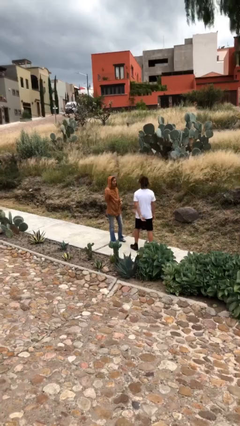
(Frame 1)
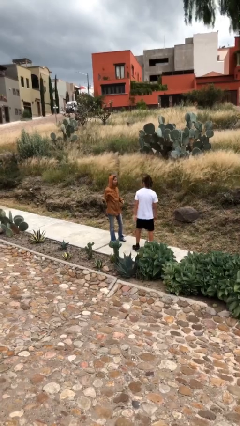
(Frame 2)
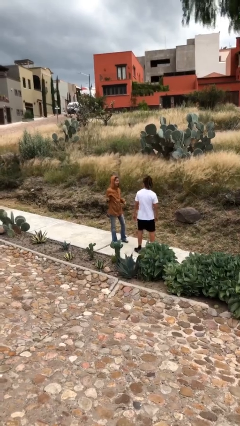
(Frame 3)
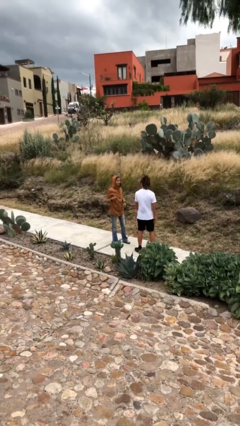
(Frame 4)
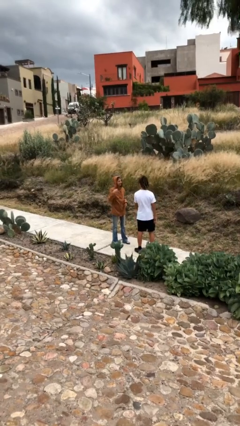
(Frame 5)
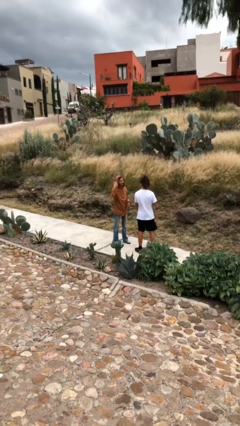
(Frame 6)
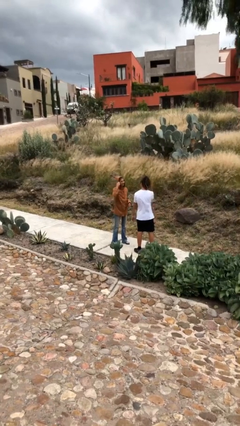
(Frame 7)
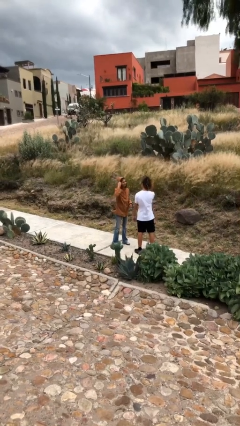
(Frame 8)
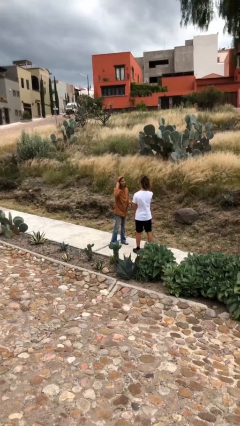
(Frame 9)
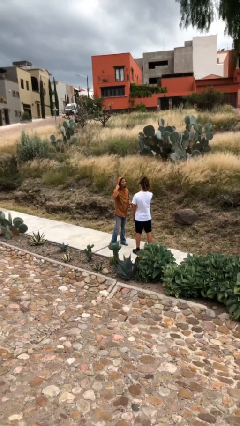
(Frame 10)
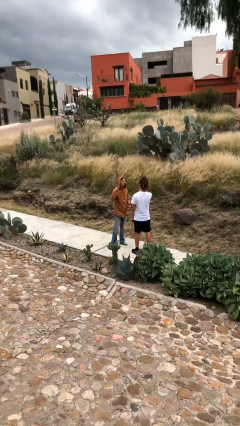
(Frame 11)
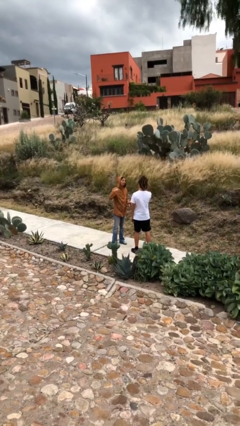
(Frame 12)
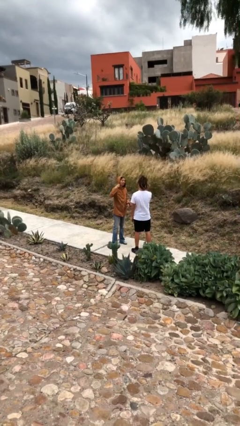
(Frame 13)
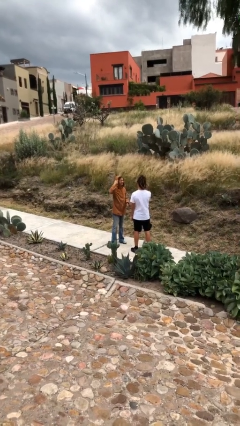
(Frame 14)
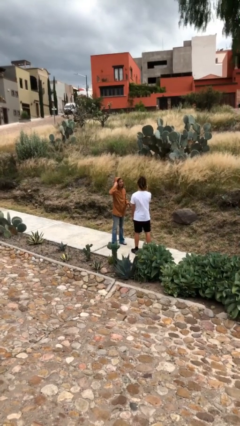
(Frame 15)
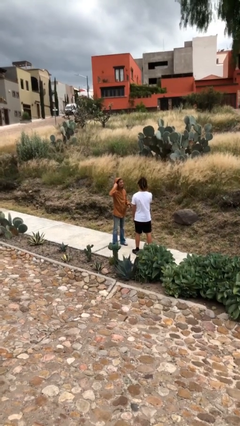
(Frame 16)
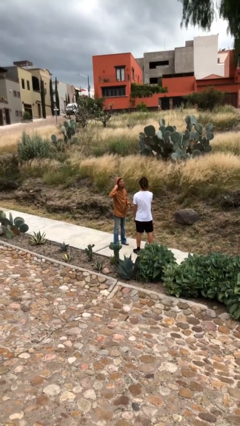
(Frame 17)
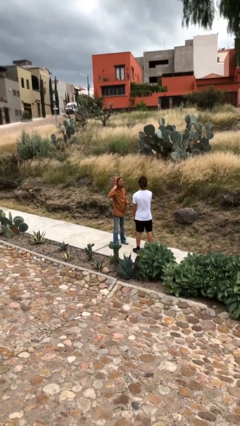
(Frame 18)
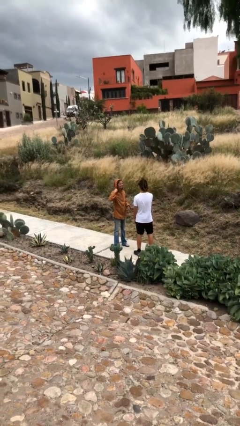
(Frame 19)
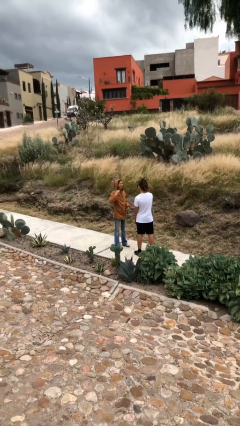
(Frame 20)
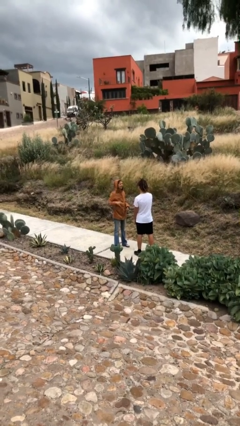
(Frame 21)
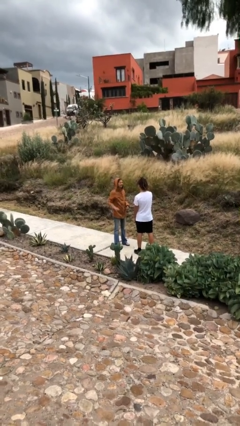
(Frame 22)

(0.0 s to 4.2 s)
person talks to person

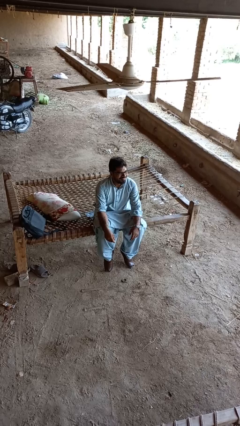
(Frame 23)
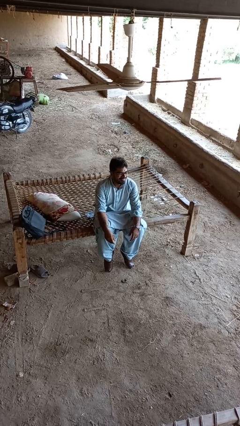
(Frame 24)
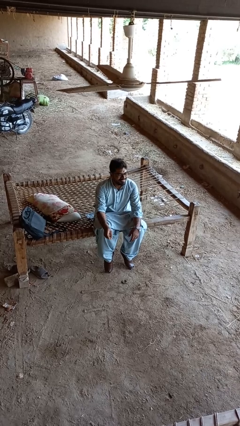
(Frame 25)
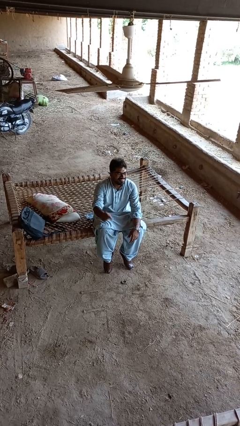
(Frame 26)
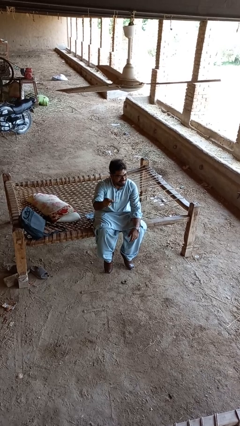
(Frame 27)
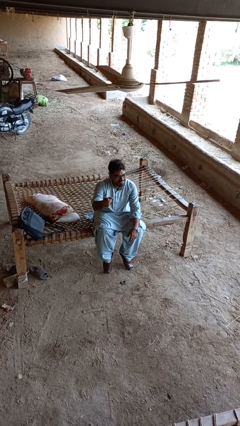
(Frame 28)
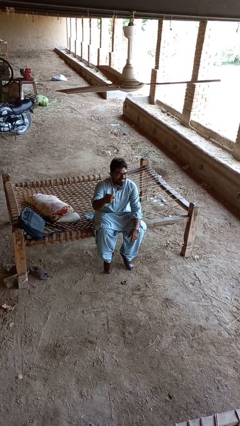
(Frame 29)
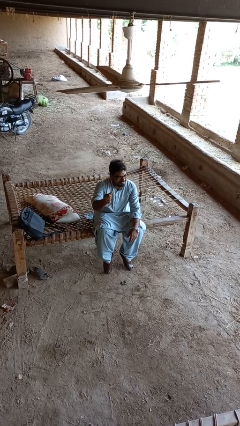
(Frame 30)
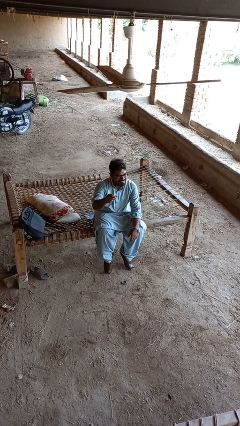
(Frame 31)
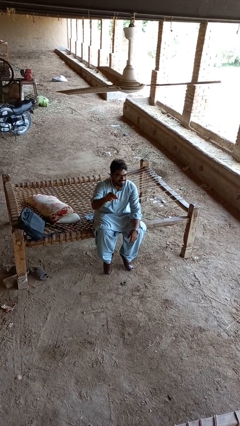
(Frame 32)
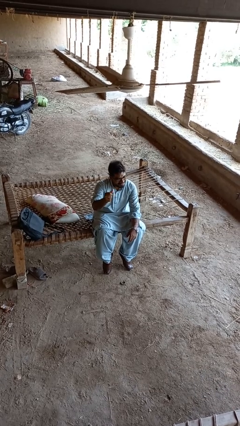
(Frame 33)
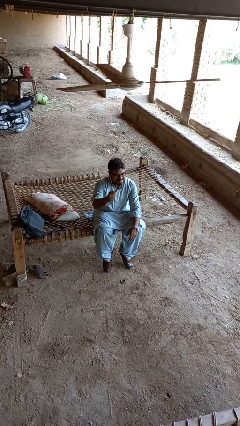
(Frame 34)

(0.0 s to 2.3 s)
person snaps fingers

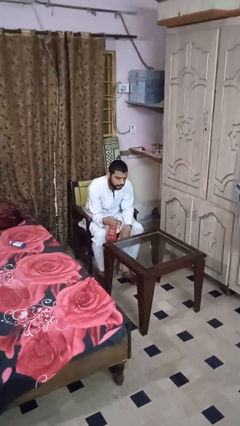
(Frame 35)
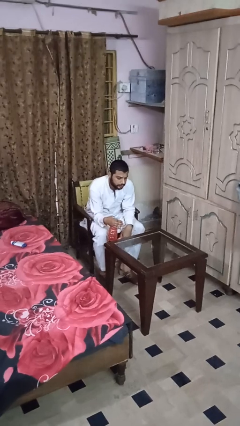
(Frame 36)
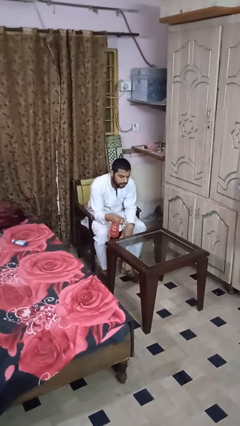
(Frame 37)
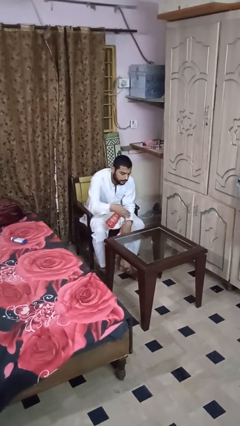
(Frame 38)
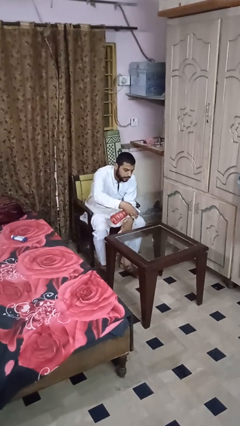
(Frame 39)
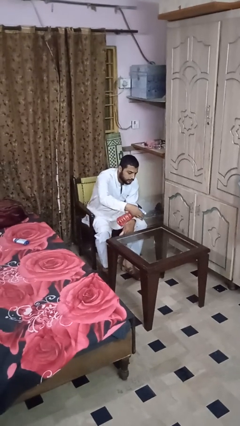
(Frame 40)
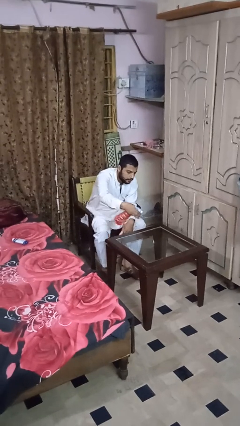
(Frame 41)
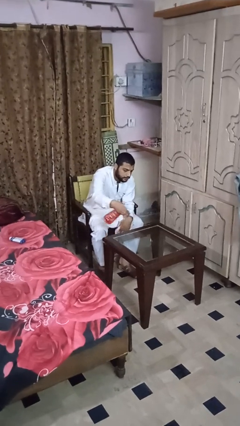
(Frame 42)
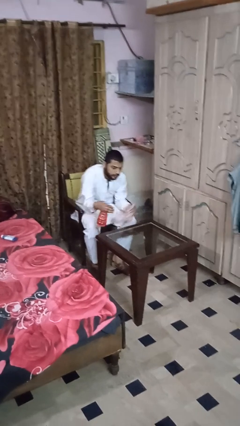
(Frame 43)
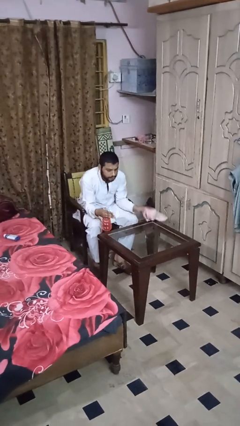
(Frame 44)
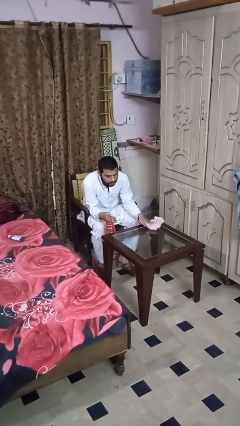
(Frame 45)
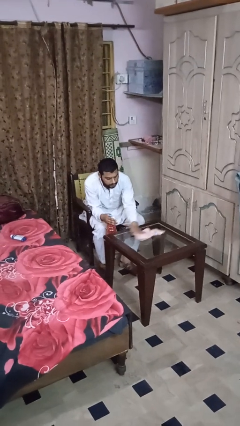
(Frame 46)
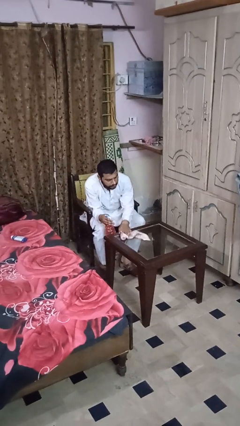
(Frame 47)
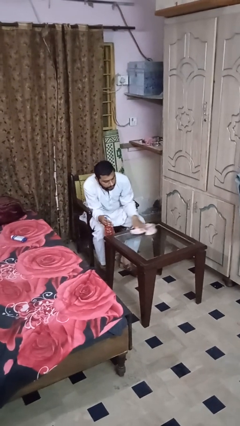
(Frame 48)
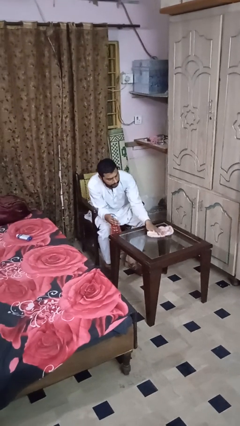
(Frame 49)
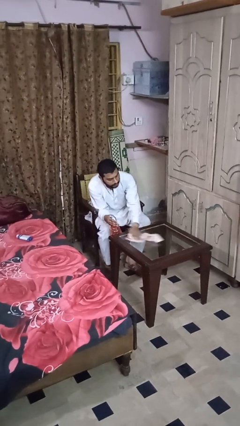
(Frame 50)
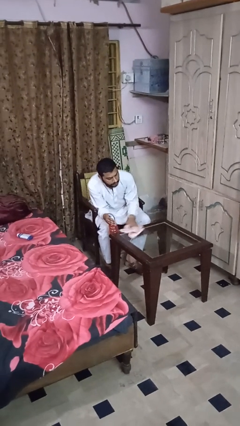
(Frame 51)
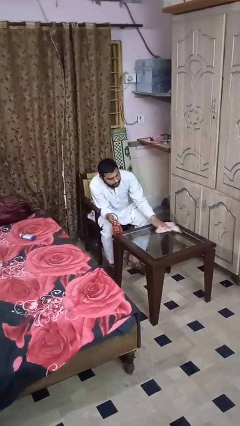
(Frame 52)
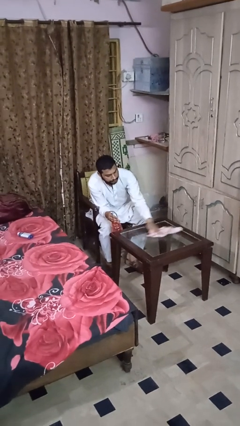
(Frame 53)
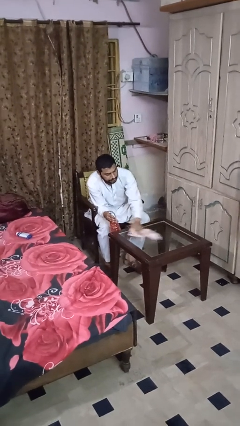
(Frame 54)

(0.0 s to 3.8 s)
person sprays from bottle

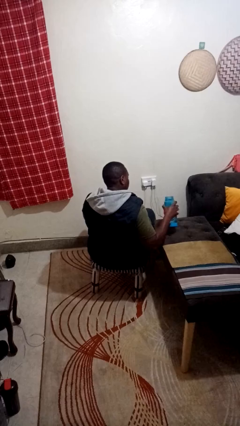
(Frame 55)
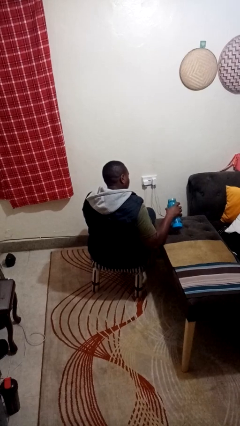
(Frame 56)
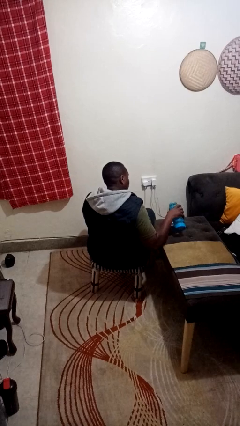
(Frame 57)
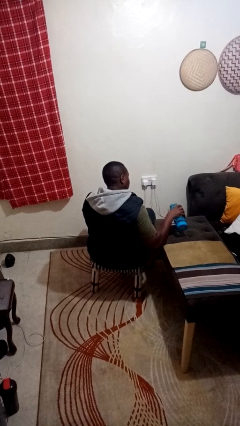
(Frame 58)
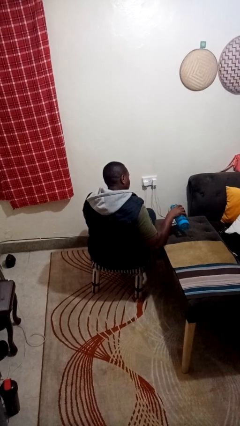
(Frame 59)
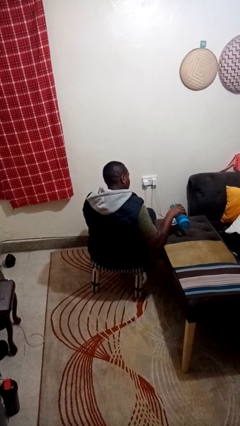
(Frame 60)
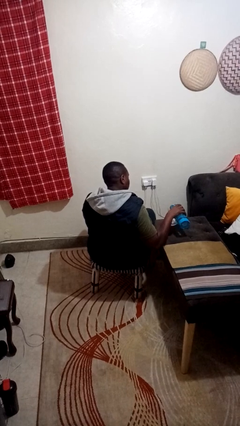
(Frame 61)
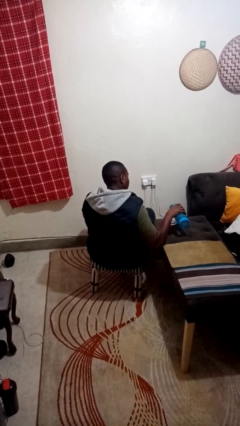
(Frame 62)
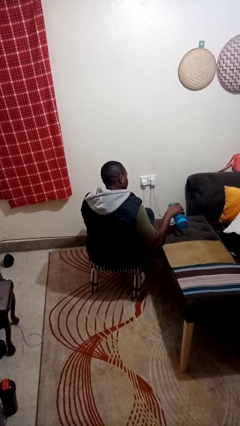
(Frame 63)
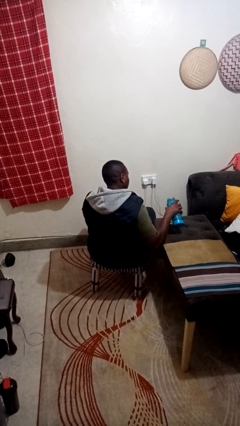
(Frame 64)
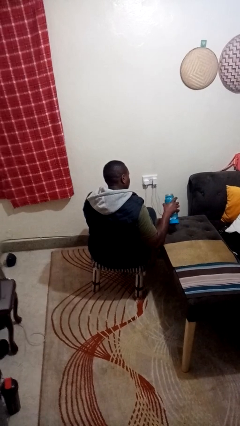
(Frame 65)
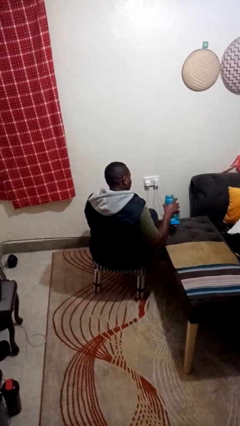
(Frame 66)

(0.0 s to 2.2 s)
person pours liquid into cup

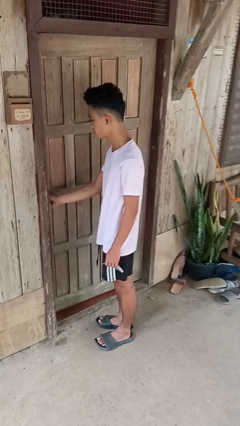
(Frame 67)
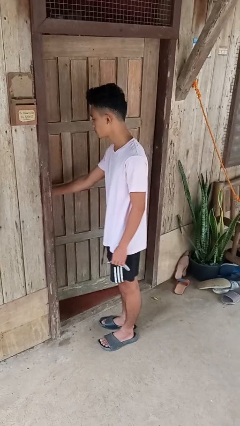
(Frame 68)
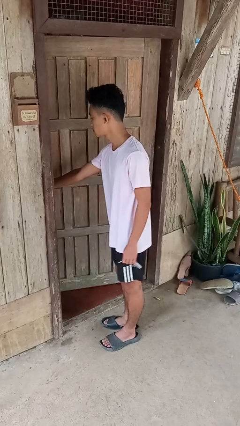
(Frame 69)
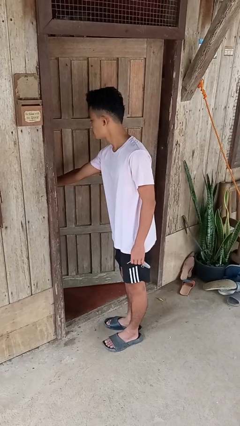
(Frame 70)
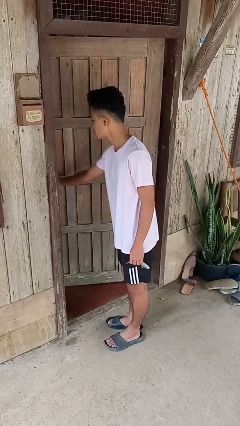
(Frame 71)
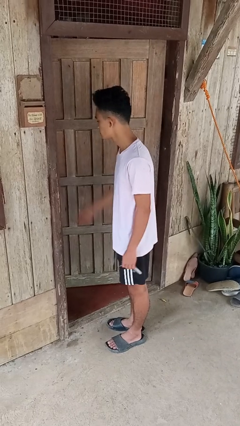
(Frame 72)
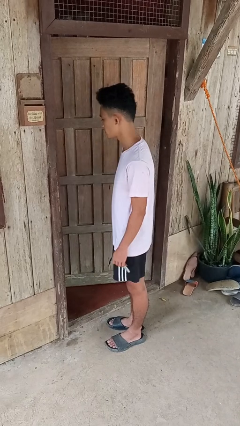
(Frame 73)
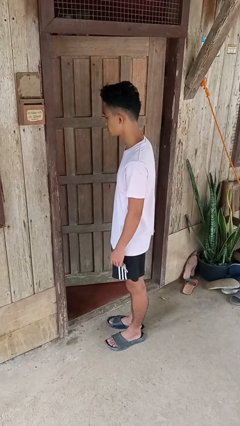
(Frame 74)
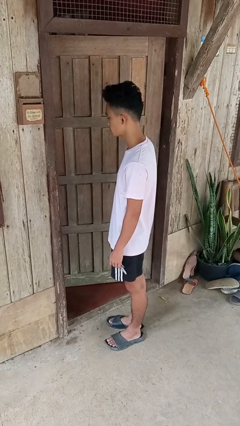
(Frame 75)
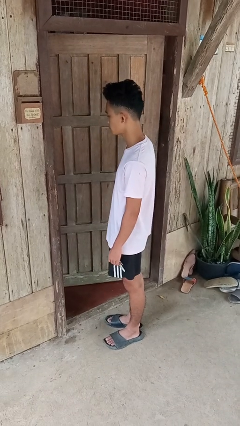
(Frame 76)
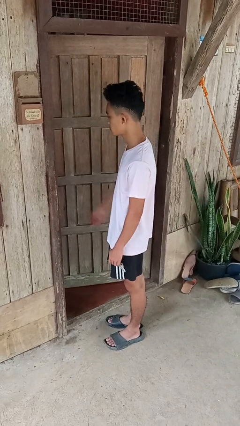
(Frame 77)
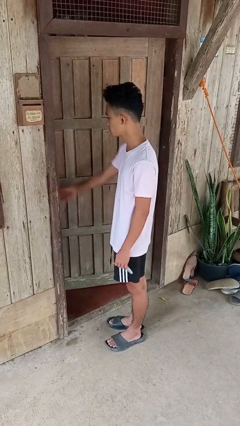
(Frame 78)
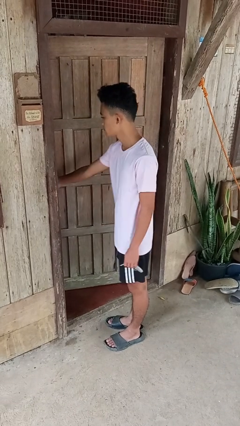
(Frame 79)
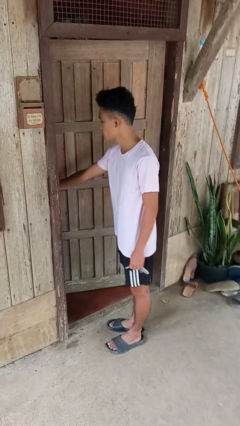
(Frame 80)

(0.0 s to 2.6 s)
person opens facility door

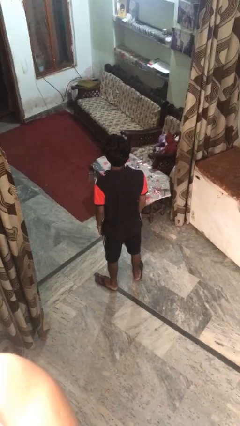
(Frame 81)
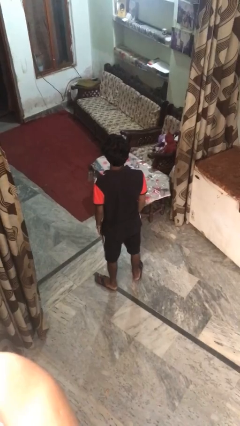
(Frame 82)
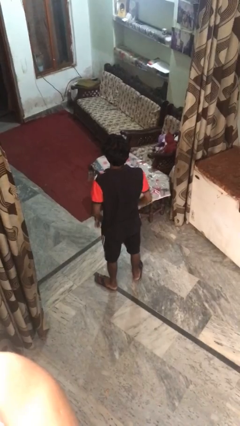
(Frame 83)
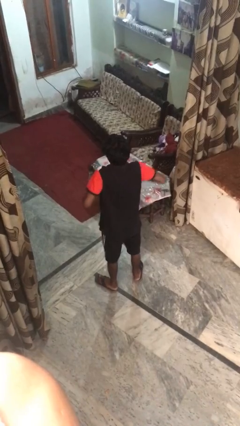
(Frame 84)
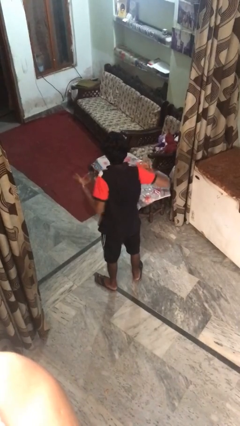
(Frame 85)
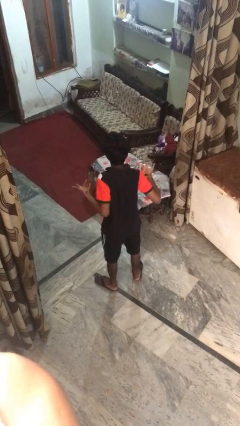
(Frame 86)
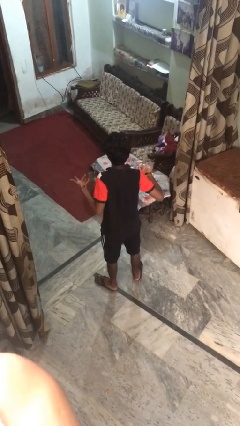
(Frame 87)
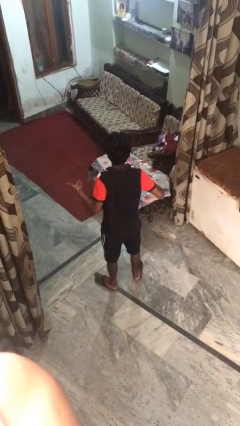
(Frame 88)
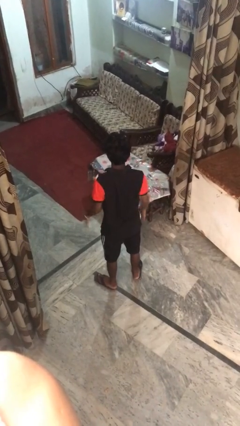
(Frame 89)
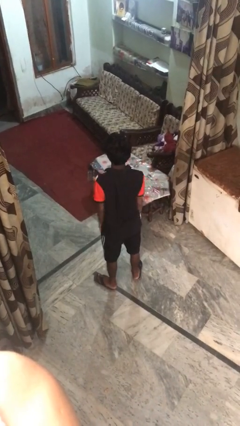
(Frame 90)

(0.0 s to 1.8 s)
person shrugs

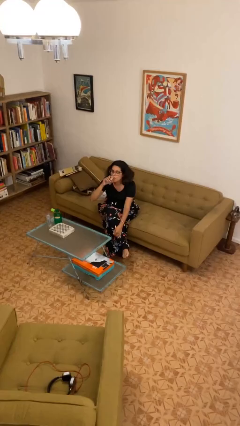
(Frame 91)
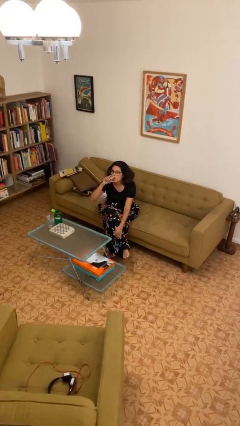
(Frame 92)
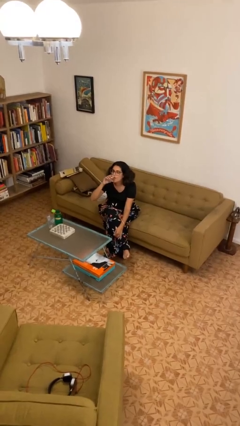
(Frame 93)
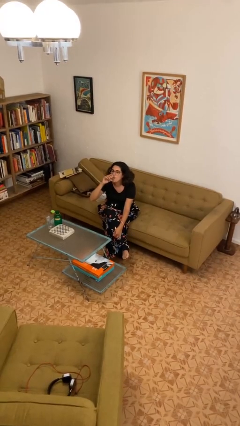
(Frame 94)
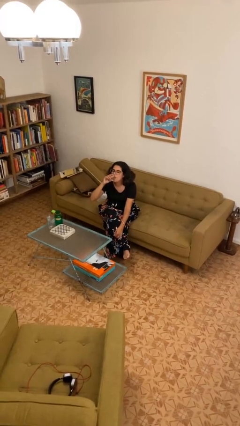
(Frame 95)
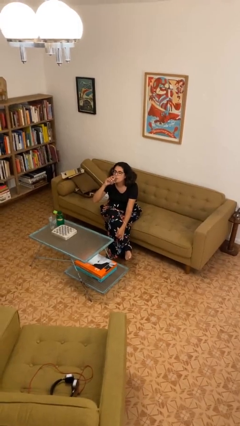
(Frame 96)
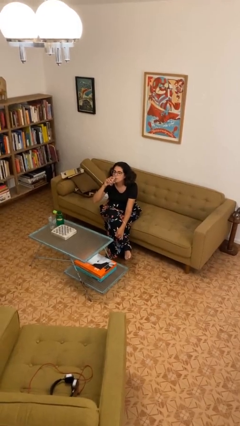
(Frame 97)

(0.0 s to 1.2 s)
person drinks from shotglass
